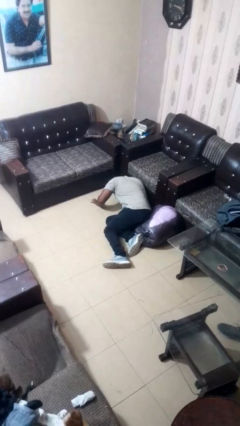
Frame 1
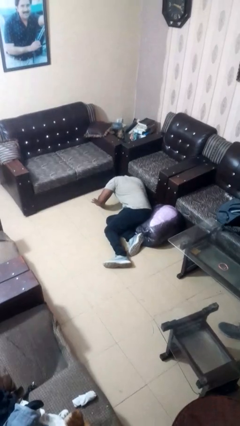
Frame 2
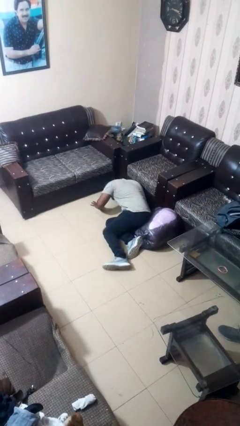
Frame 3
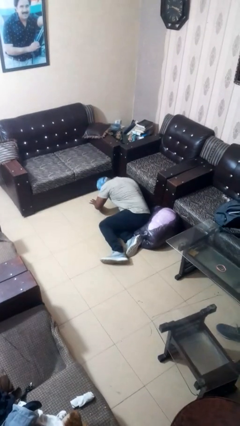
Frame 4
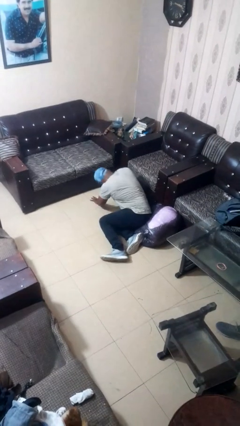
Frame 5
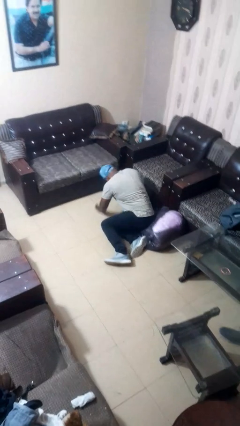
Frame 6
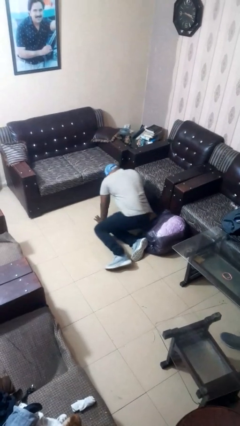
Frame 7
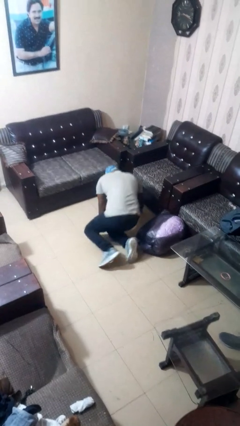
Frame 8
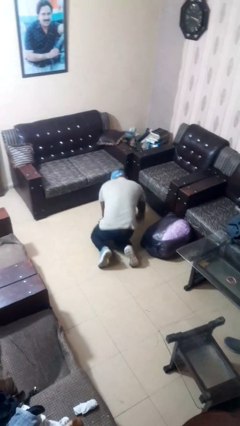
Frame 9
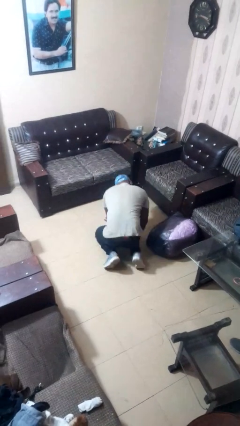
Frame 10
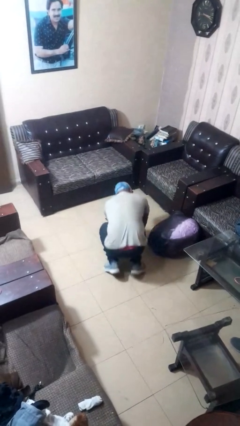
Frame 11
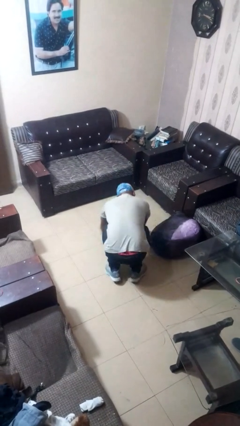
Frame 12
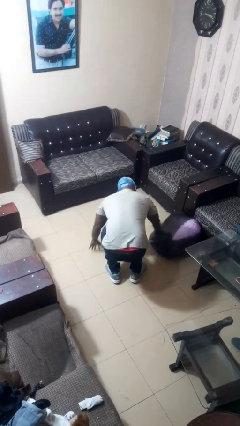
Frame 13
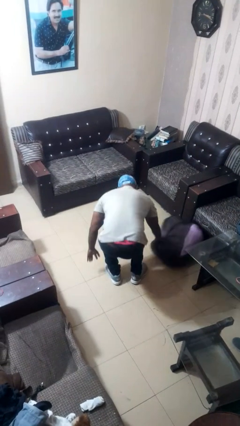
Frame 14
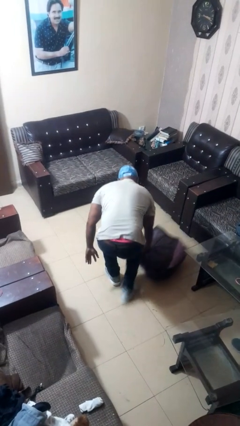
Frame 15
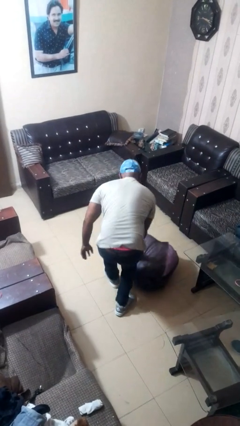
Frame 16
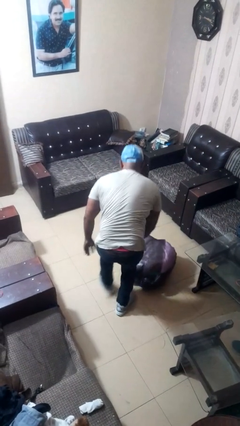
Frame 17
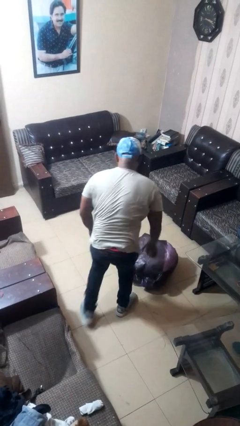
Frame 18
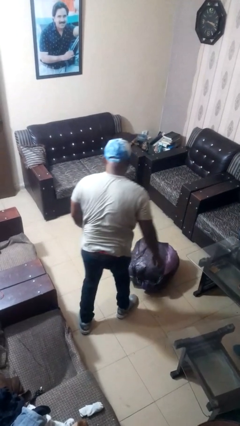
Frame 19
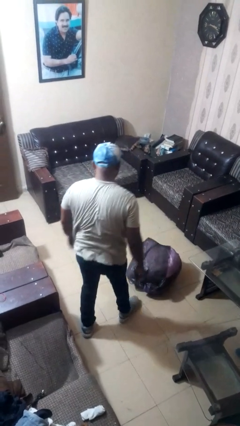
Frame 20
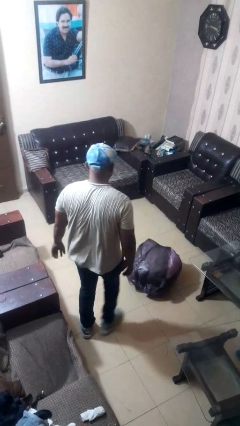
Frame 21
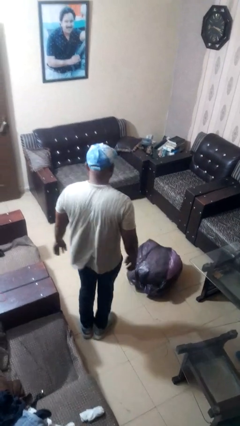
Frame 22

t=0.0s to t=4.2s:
person stands up from floor

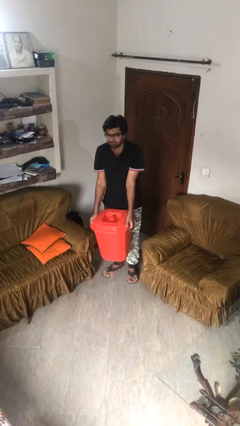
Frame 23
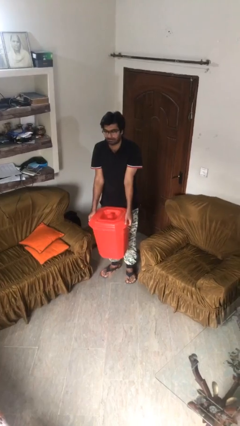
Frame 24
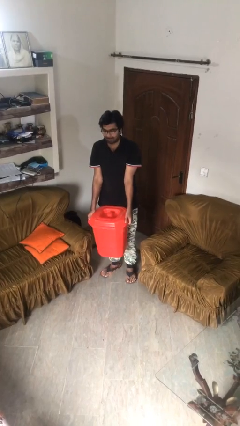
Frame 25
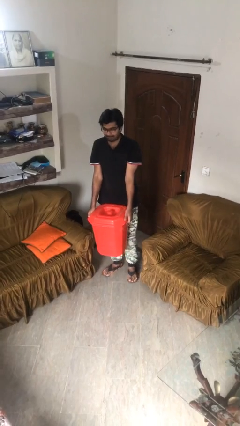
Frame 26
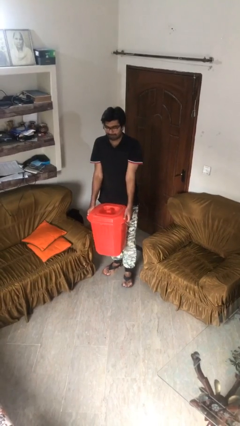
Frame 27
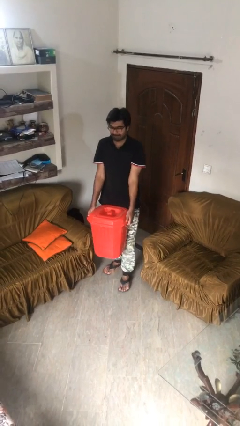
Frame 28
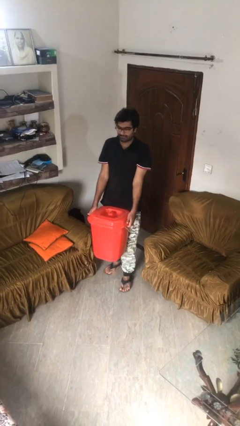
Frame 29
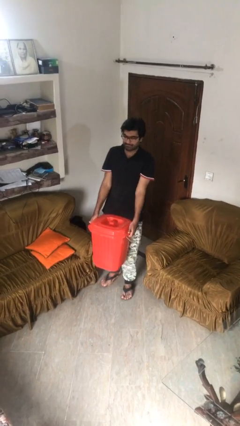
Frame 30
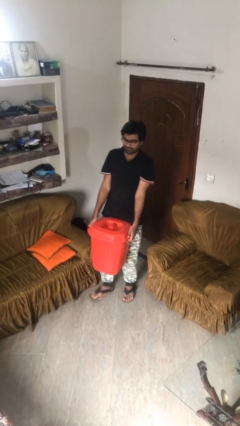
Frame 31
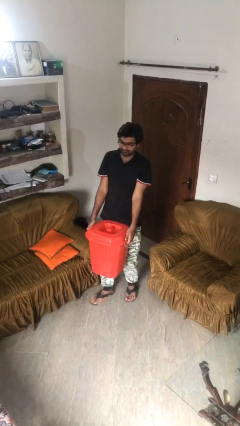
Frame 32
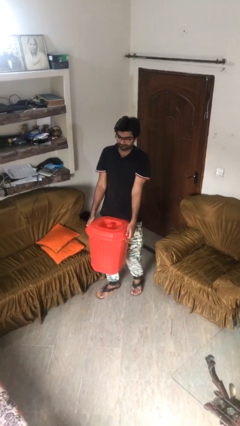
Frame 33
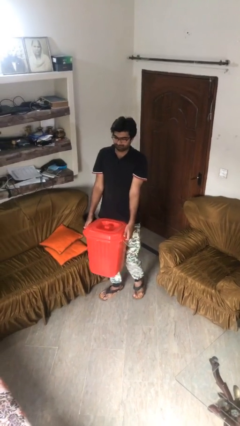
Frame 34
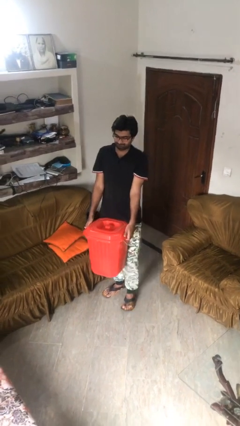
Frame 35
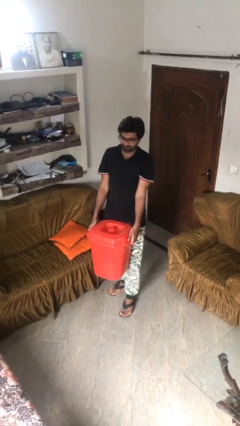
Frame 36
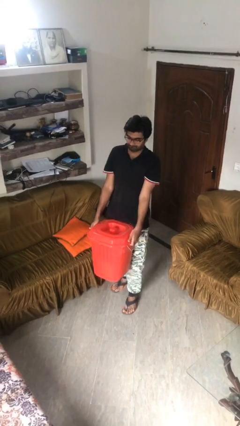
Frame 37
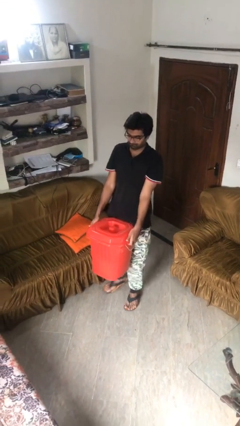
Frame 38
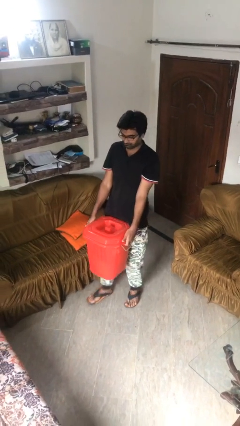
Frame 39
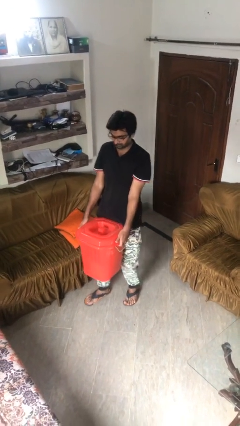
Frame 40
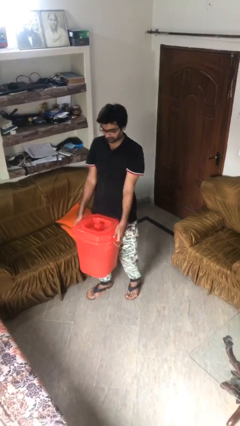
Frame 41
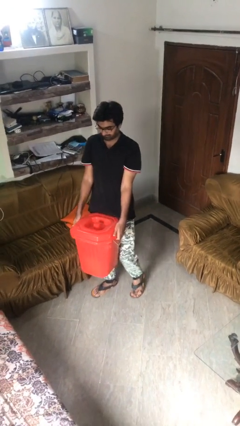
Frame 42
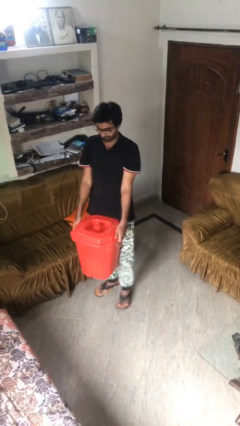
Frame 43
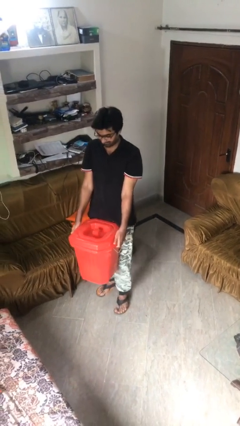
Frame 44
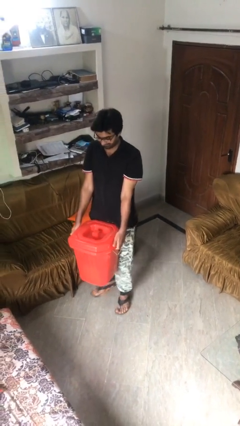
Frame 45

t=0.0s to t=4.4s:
person carries heavy object

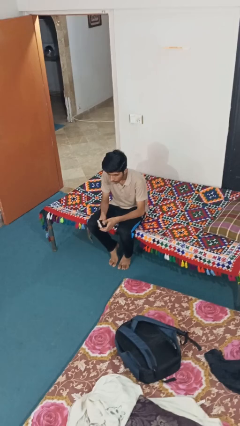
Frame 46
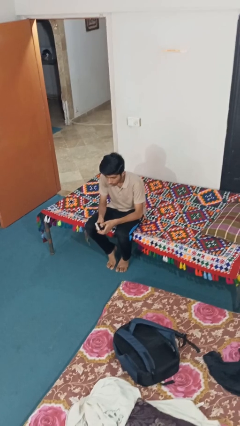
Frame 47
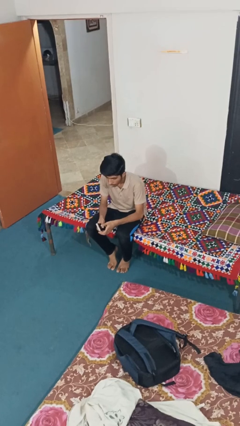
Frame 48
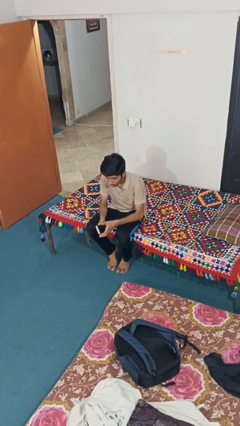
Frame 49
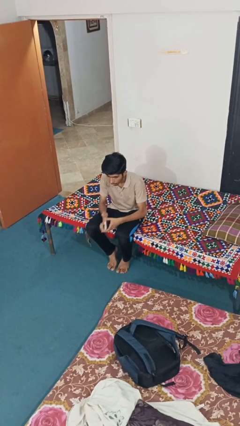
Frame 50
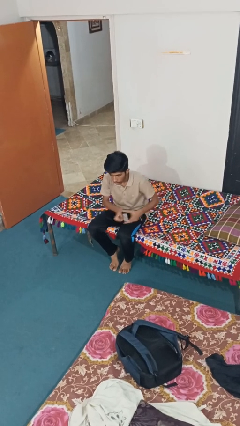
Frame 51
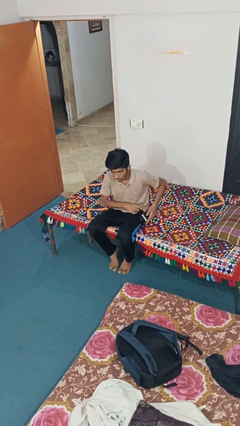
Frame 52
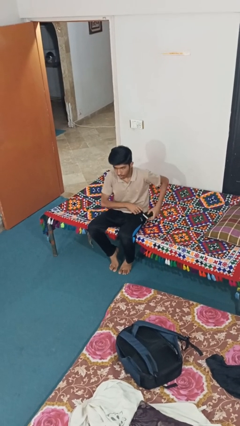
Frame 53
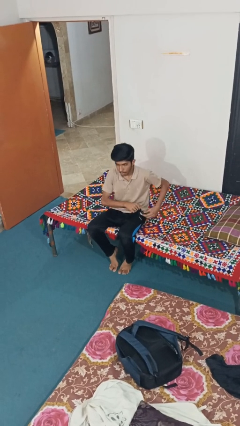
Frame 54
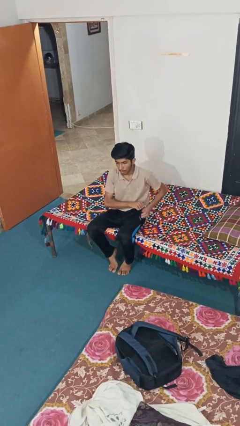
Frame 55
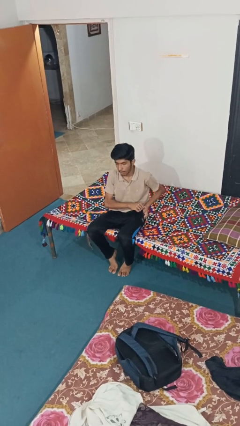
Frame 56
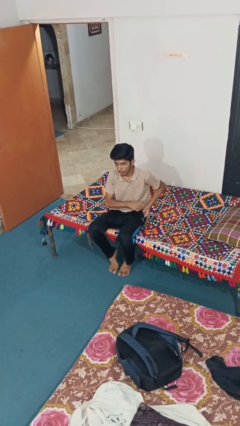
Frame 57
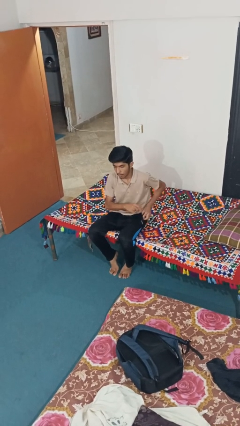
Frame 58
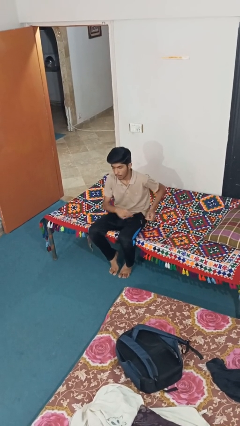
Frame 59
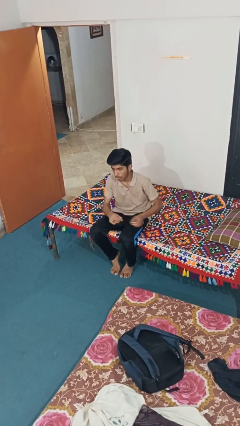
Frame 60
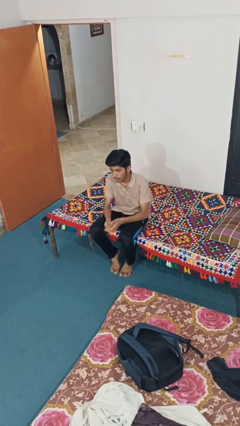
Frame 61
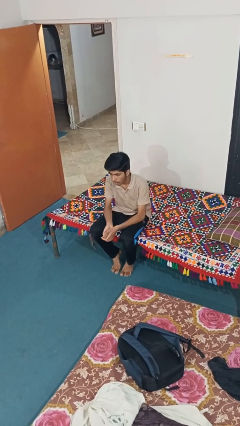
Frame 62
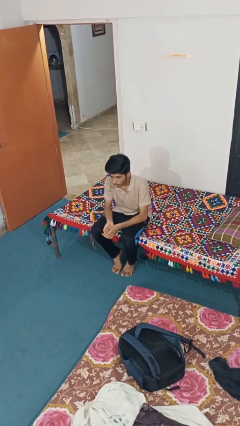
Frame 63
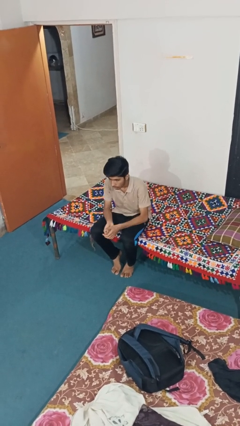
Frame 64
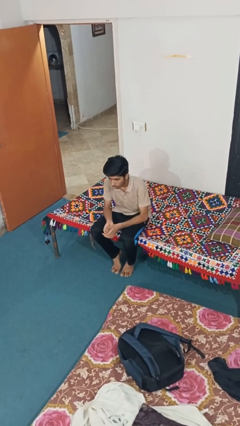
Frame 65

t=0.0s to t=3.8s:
person puts phone into pocket

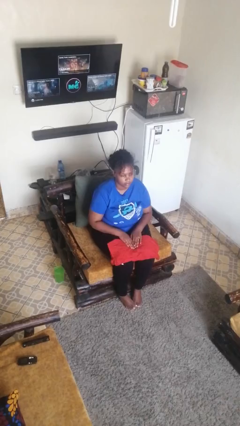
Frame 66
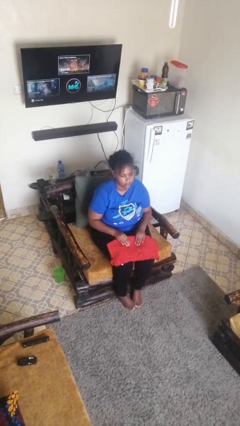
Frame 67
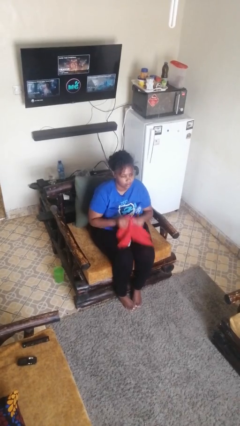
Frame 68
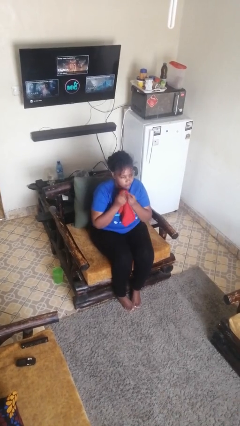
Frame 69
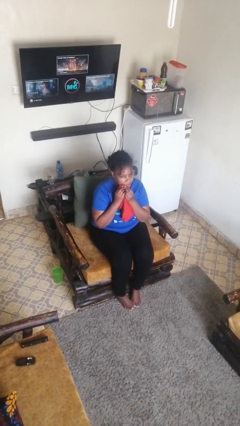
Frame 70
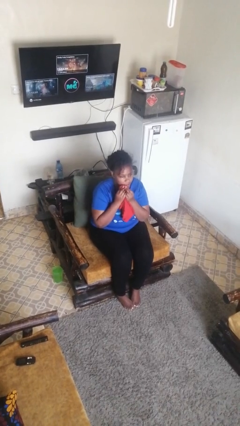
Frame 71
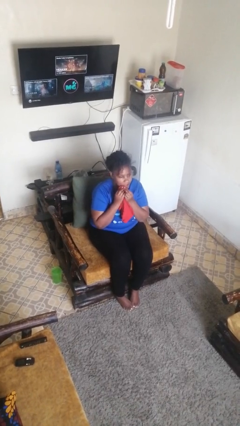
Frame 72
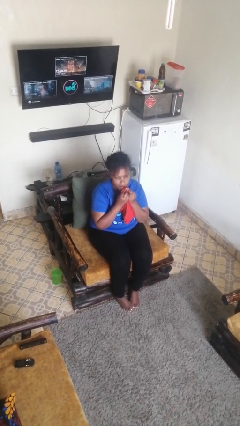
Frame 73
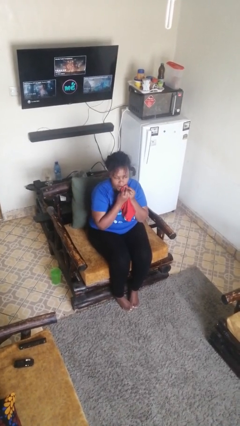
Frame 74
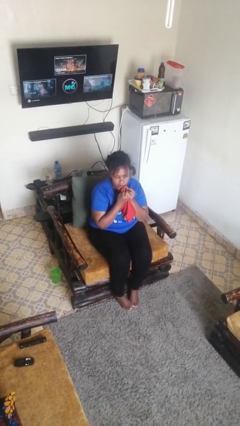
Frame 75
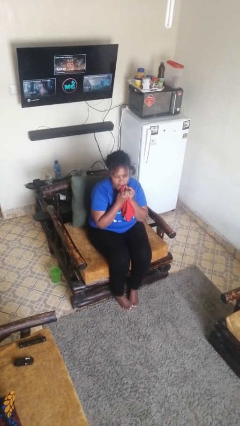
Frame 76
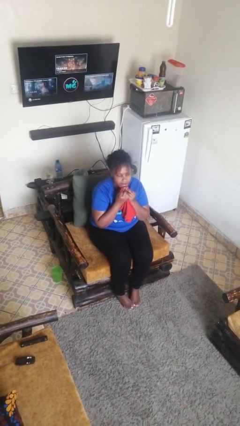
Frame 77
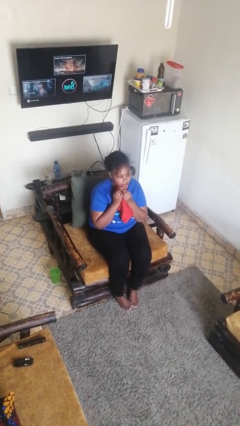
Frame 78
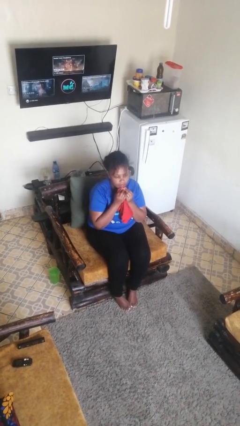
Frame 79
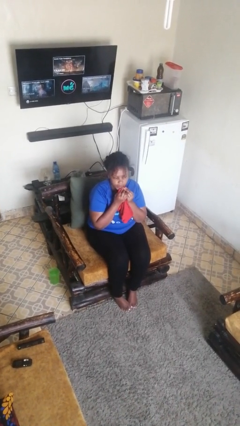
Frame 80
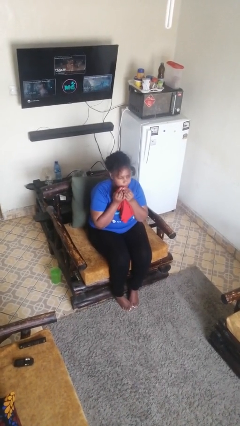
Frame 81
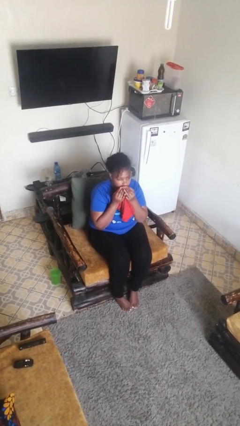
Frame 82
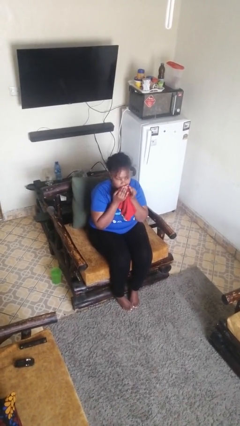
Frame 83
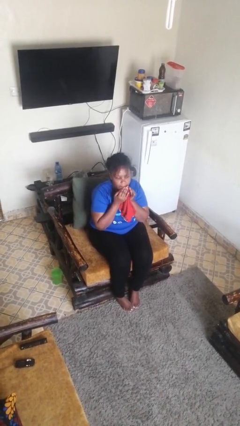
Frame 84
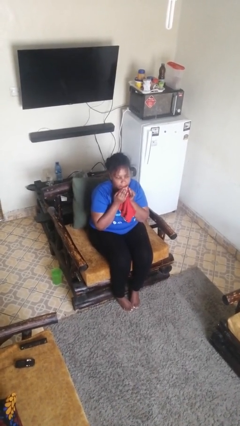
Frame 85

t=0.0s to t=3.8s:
person wipes mouth with napkin

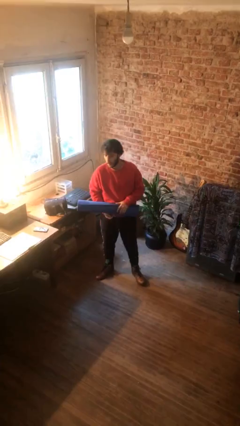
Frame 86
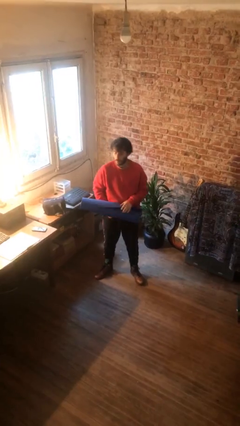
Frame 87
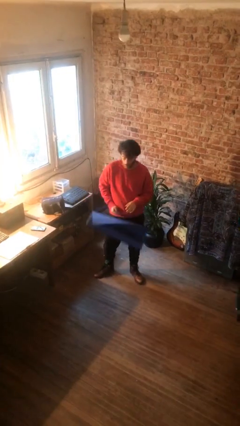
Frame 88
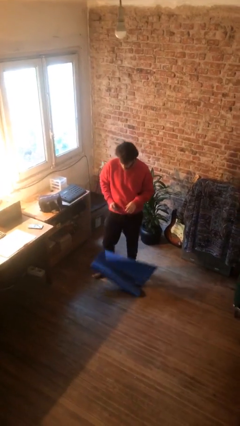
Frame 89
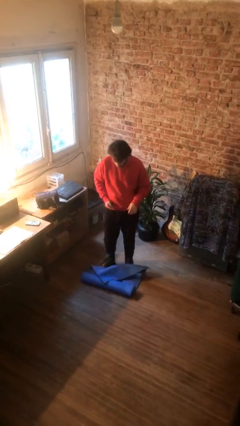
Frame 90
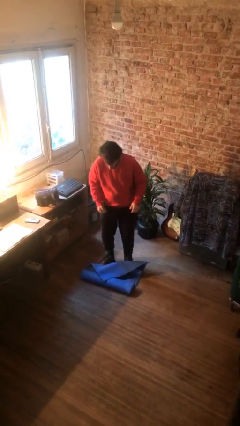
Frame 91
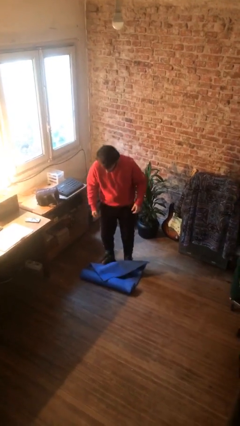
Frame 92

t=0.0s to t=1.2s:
person drops object

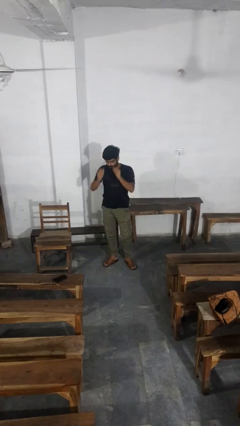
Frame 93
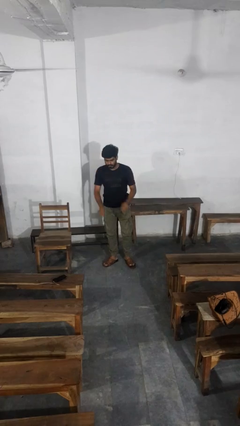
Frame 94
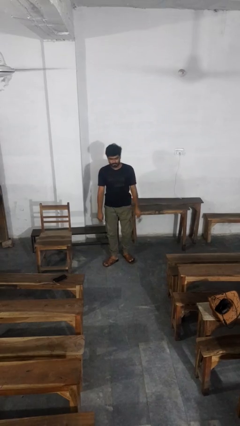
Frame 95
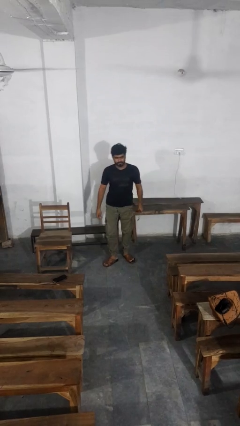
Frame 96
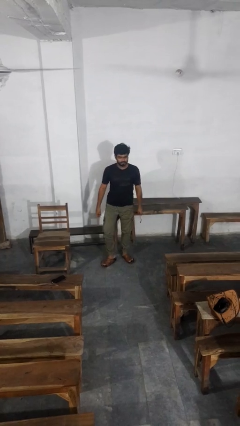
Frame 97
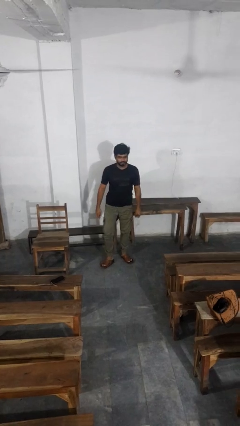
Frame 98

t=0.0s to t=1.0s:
person takes off sunglasses
